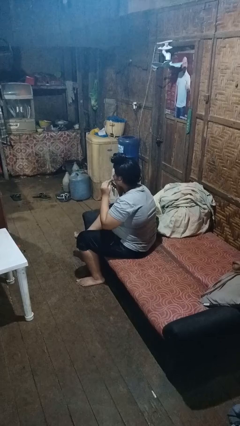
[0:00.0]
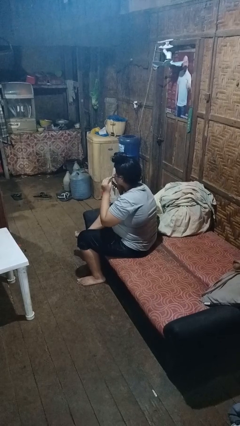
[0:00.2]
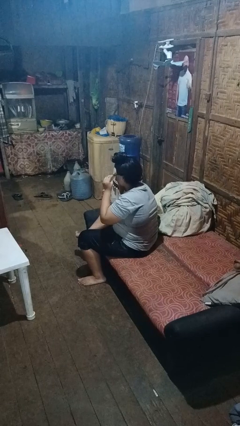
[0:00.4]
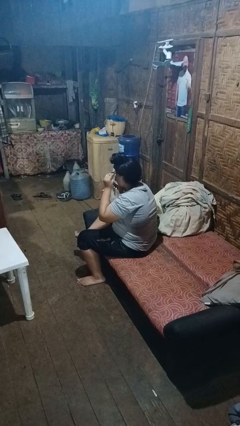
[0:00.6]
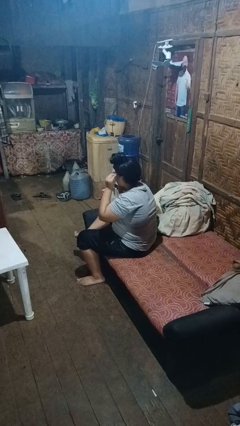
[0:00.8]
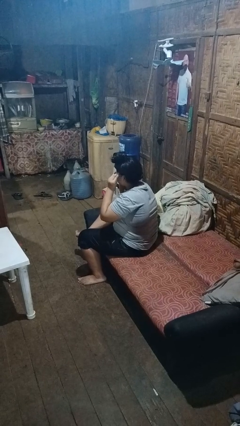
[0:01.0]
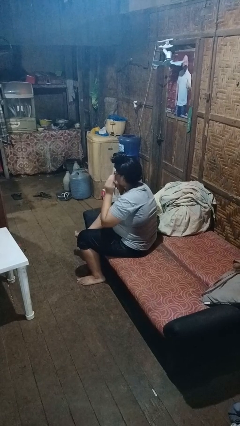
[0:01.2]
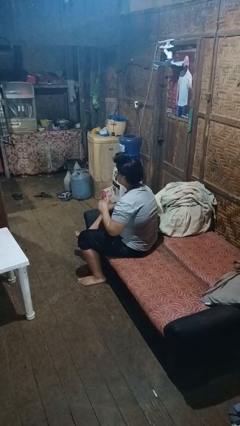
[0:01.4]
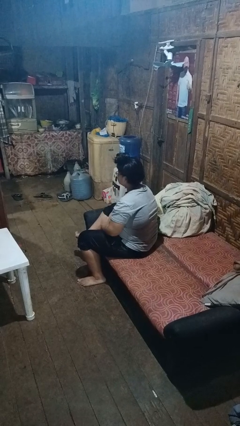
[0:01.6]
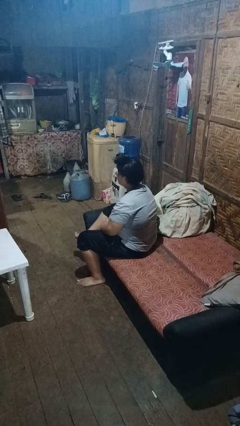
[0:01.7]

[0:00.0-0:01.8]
person puts on glasses

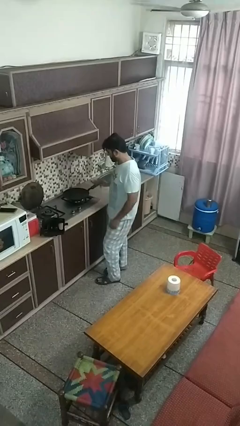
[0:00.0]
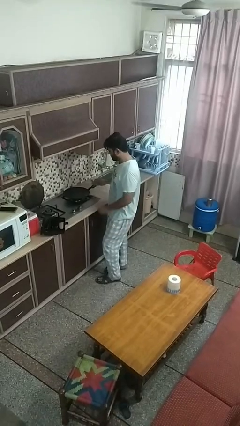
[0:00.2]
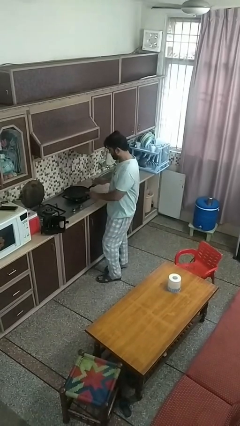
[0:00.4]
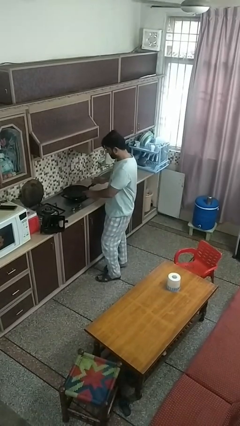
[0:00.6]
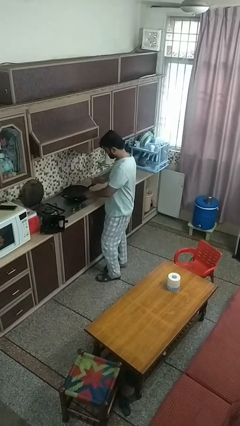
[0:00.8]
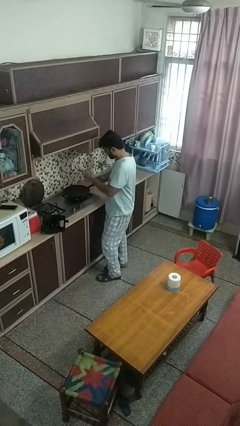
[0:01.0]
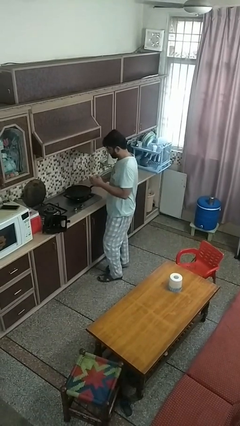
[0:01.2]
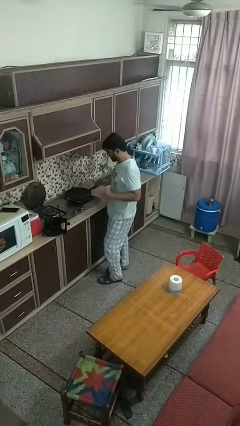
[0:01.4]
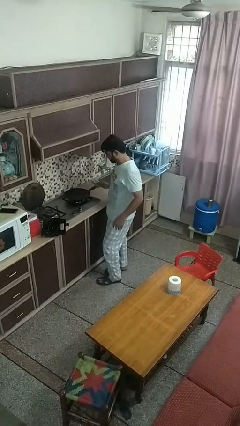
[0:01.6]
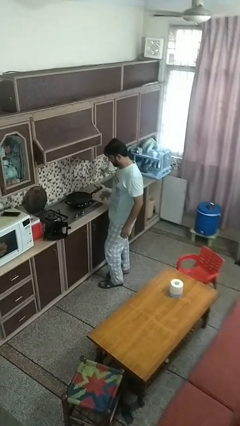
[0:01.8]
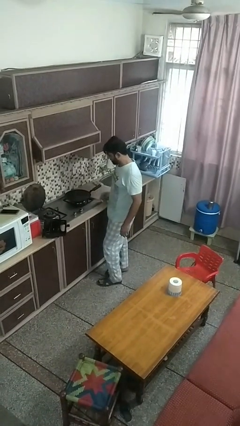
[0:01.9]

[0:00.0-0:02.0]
person burns hand

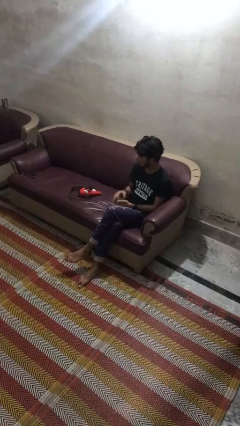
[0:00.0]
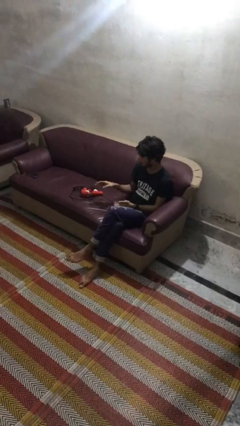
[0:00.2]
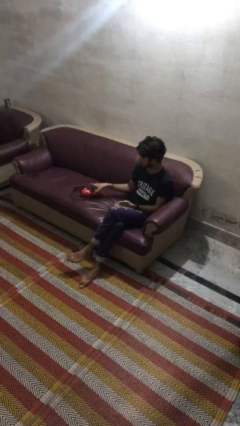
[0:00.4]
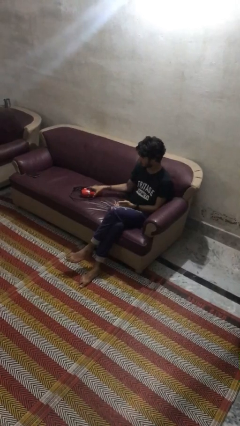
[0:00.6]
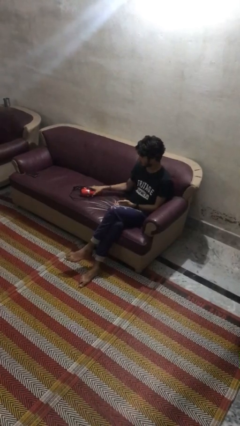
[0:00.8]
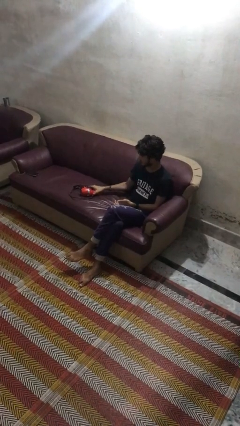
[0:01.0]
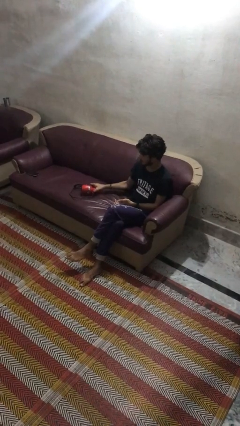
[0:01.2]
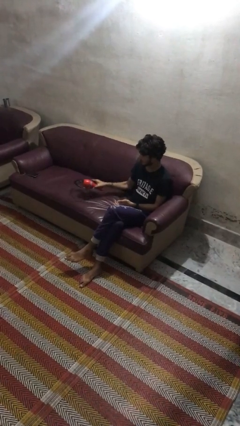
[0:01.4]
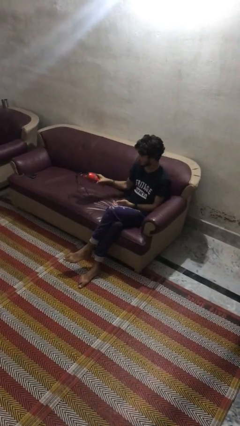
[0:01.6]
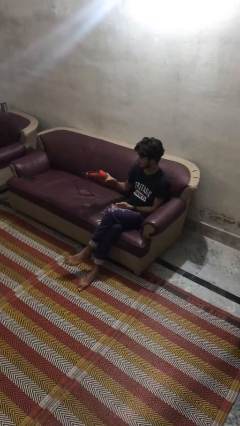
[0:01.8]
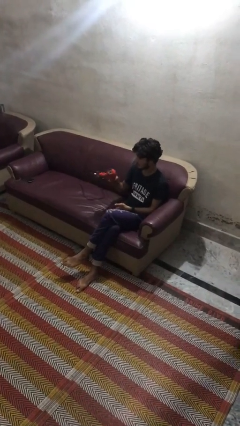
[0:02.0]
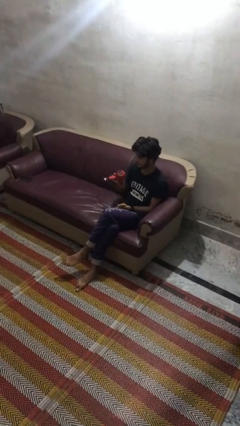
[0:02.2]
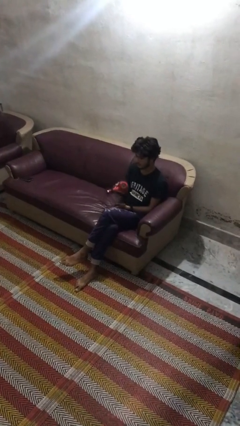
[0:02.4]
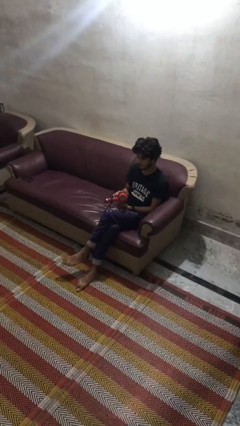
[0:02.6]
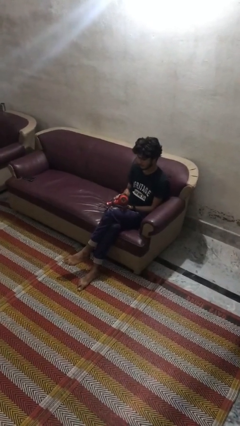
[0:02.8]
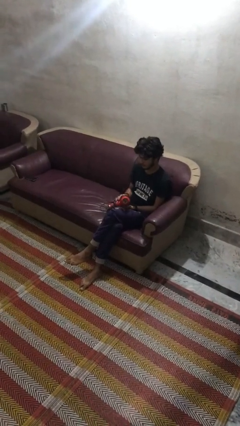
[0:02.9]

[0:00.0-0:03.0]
person picks up object from couch

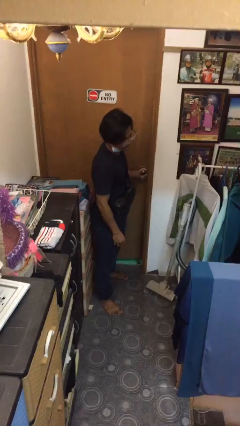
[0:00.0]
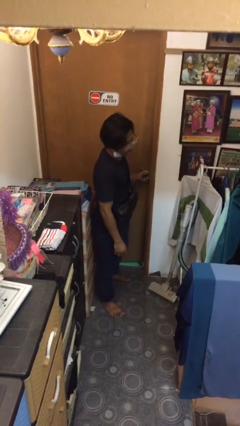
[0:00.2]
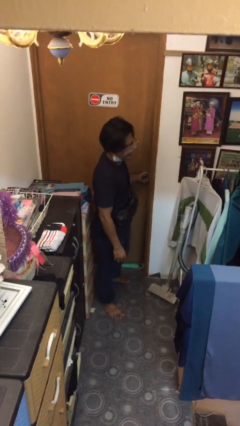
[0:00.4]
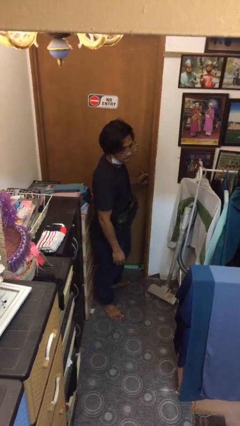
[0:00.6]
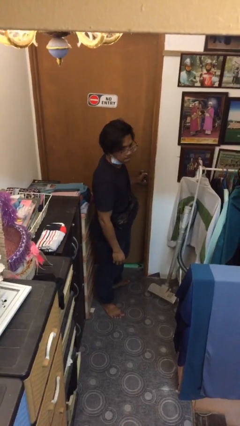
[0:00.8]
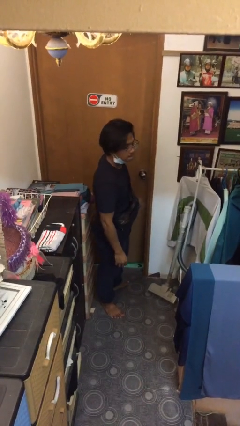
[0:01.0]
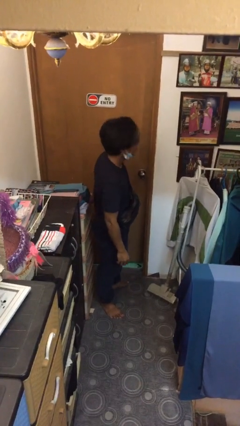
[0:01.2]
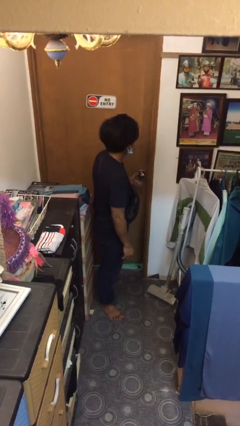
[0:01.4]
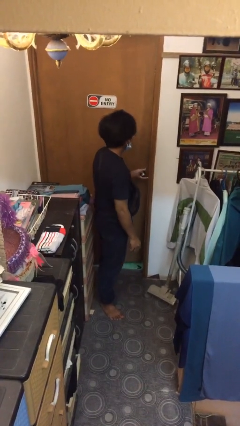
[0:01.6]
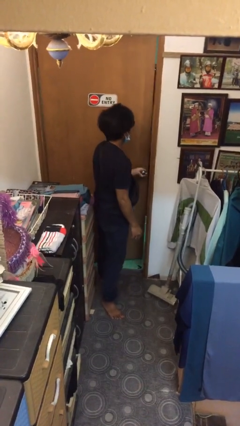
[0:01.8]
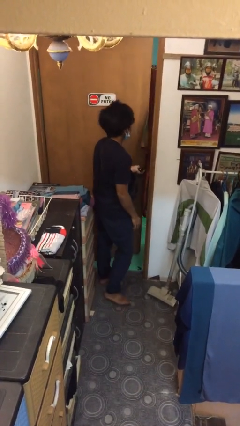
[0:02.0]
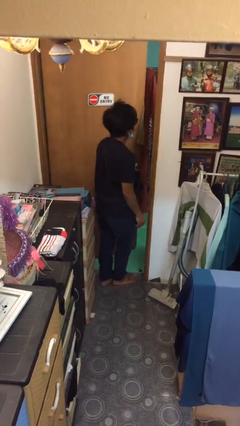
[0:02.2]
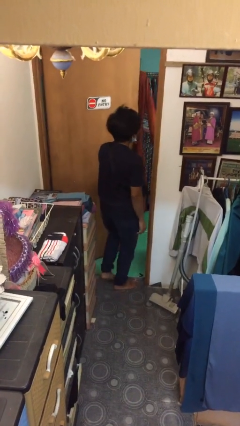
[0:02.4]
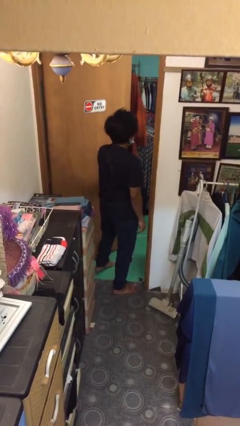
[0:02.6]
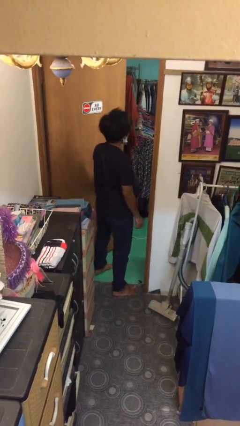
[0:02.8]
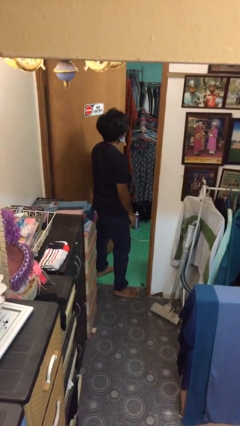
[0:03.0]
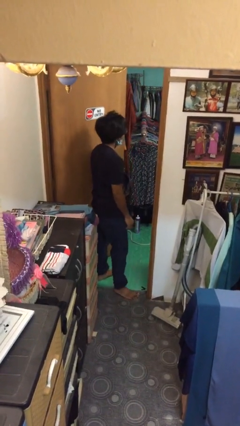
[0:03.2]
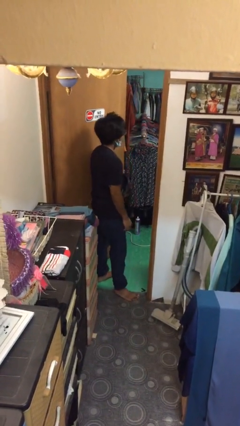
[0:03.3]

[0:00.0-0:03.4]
person opens facility door

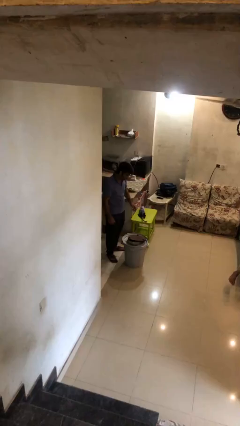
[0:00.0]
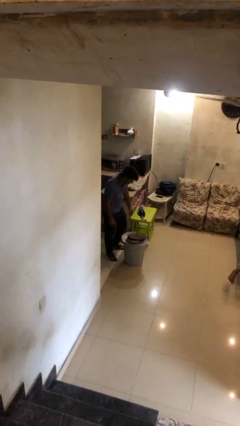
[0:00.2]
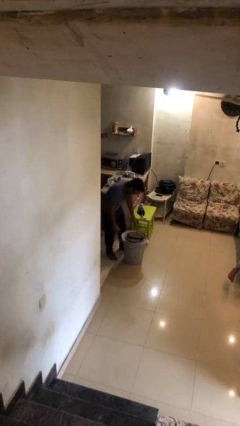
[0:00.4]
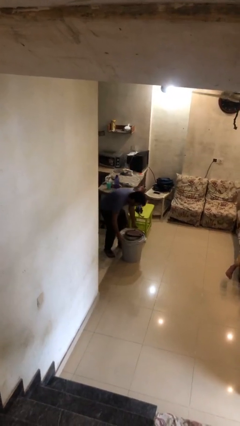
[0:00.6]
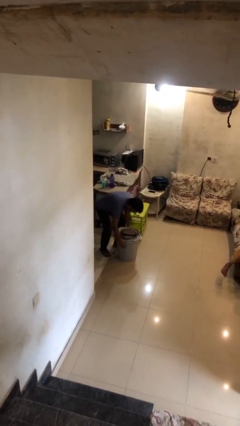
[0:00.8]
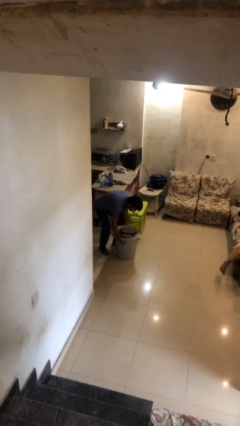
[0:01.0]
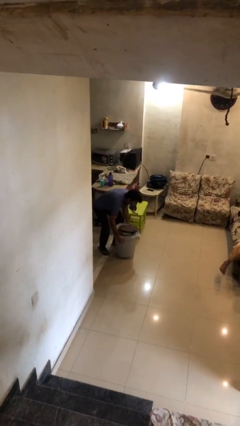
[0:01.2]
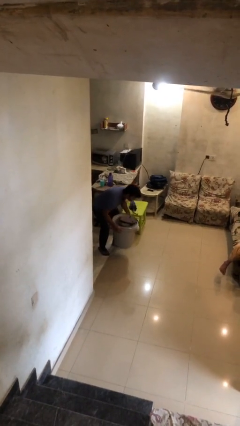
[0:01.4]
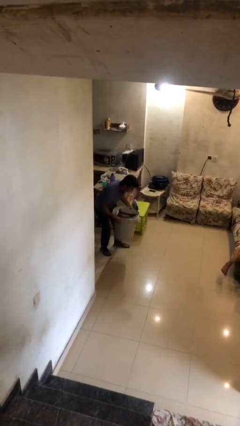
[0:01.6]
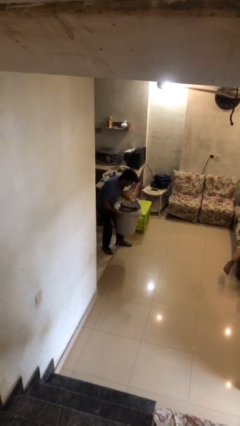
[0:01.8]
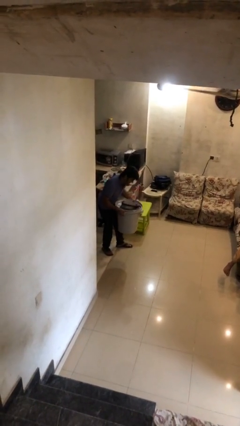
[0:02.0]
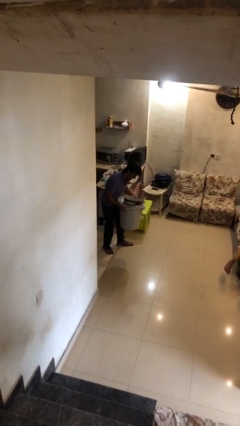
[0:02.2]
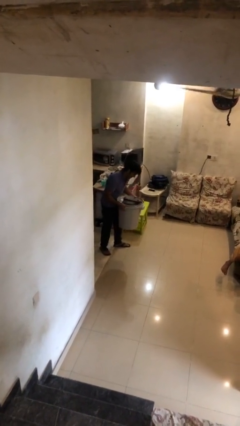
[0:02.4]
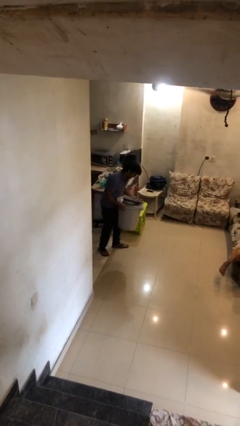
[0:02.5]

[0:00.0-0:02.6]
person picks up object from floor

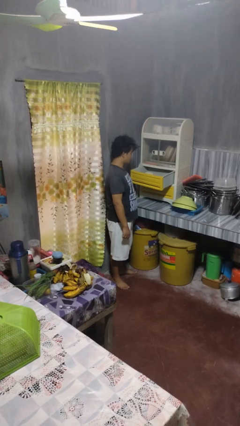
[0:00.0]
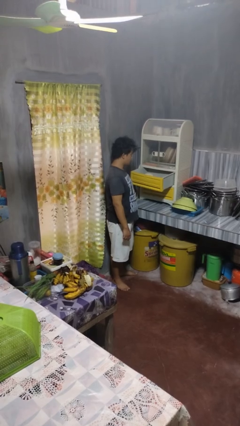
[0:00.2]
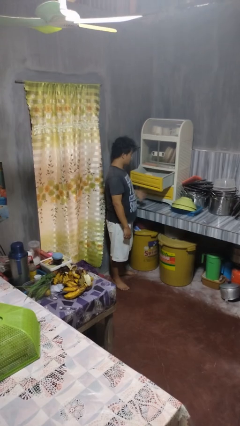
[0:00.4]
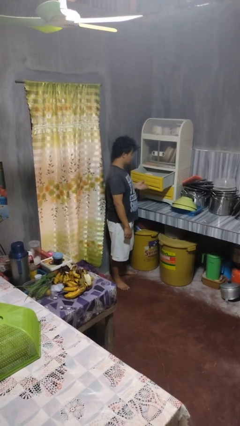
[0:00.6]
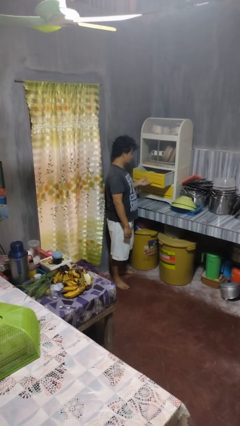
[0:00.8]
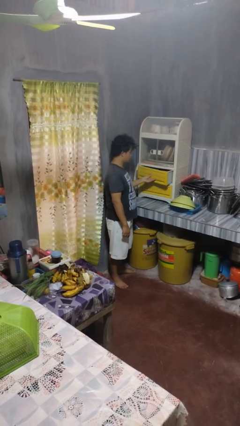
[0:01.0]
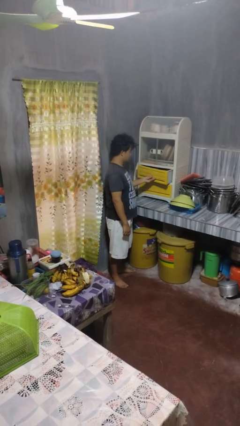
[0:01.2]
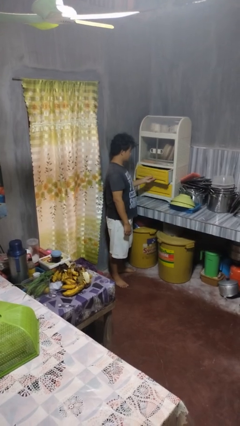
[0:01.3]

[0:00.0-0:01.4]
person closes kitchen drawer

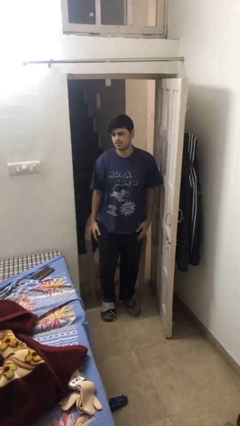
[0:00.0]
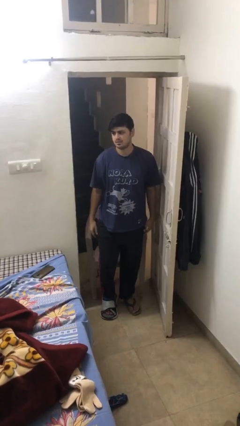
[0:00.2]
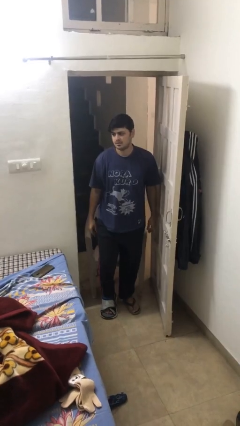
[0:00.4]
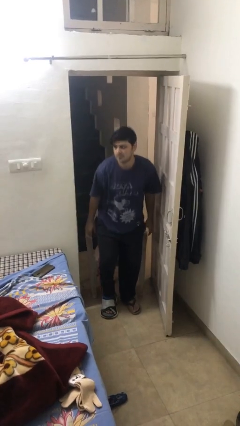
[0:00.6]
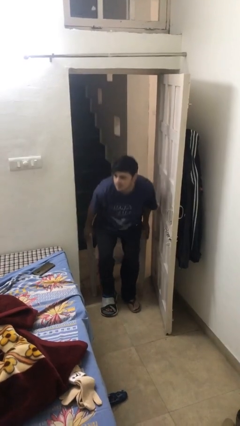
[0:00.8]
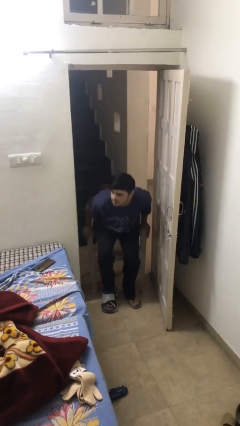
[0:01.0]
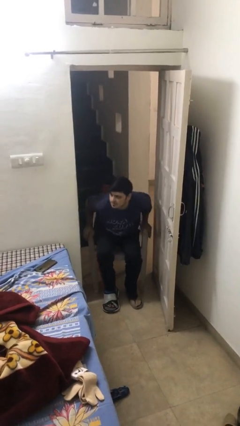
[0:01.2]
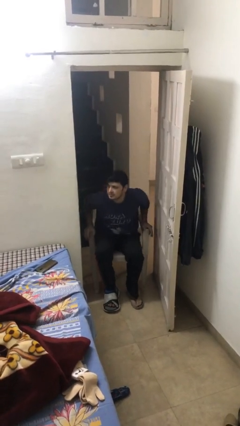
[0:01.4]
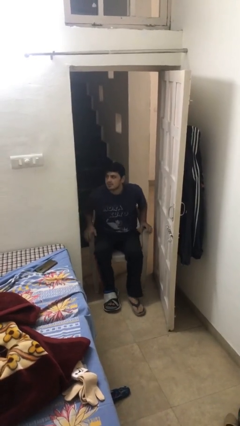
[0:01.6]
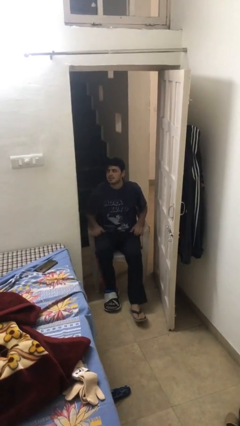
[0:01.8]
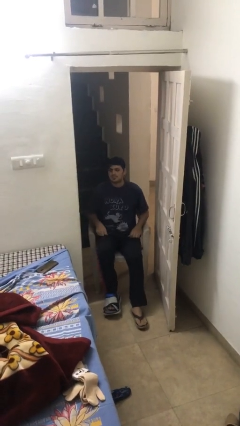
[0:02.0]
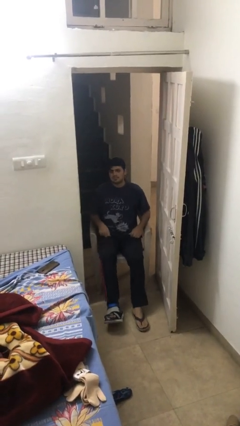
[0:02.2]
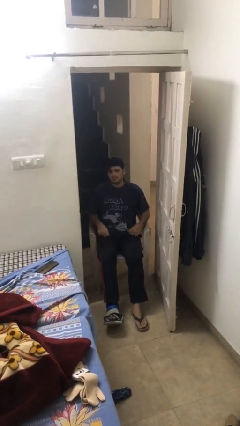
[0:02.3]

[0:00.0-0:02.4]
person sits down
